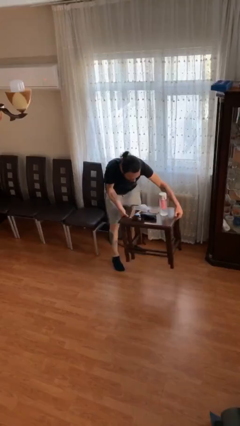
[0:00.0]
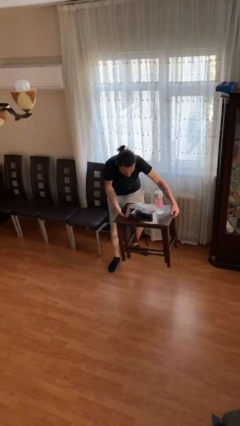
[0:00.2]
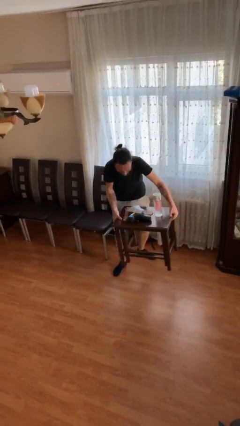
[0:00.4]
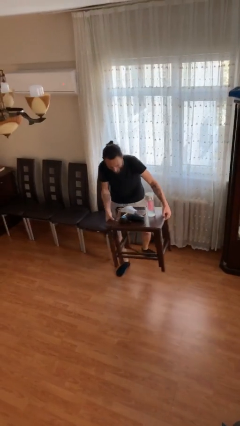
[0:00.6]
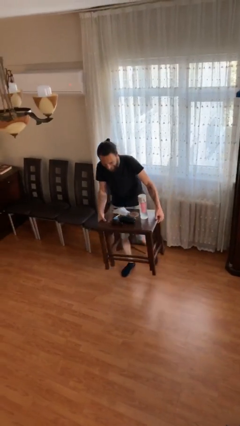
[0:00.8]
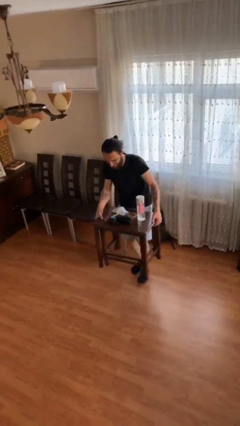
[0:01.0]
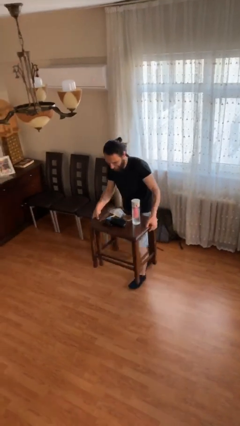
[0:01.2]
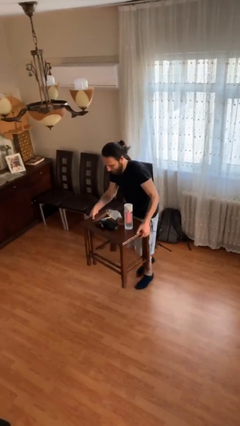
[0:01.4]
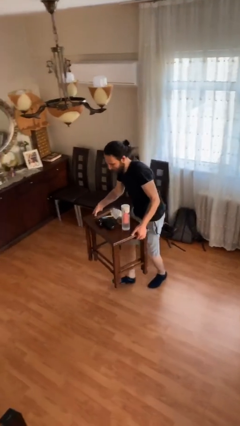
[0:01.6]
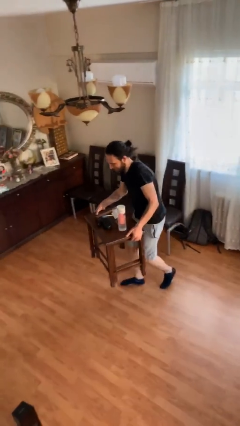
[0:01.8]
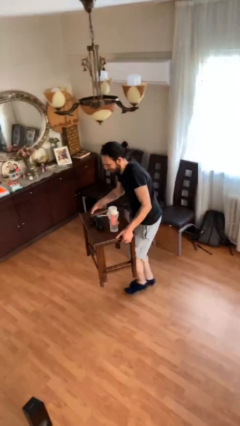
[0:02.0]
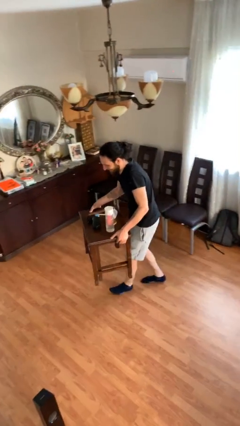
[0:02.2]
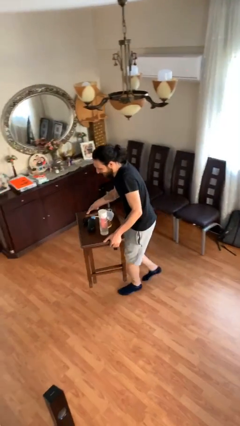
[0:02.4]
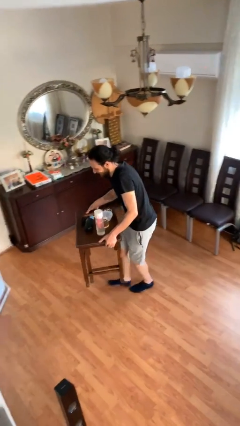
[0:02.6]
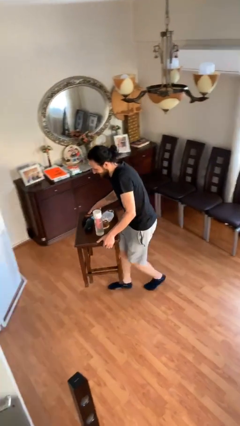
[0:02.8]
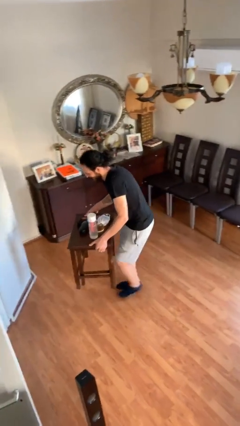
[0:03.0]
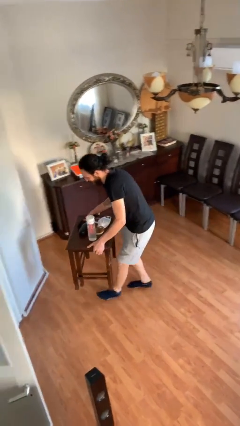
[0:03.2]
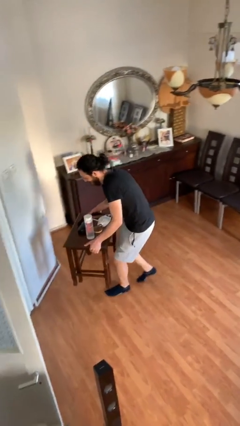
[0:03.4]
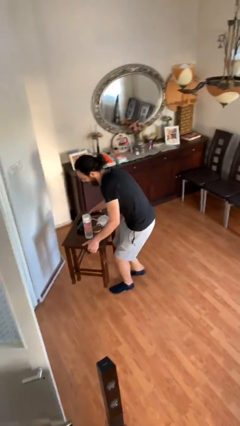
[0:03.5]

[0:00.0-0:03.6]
person carries heavy object

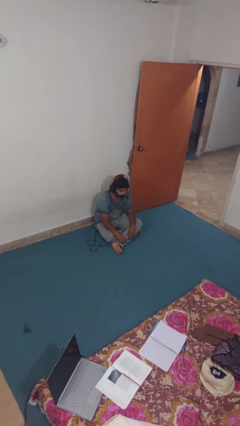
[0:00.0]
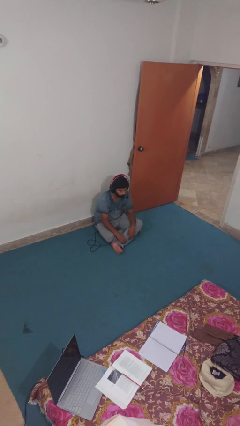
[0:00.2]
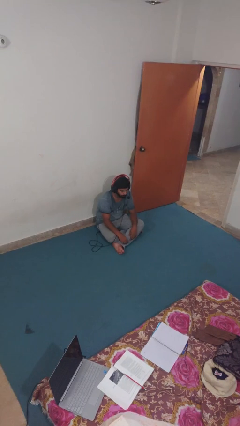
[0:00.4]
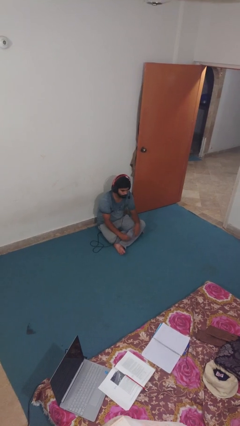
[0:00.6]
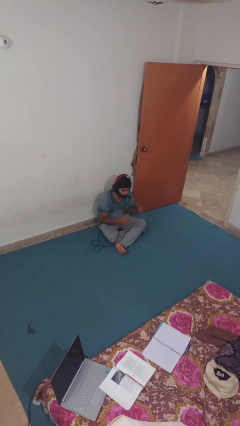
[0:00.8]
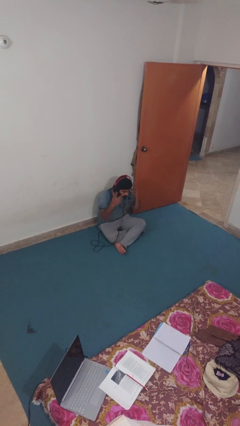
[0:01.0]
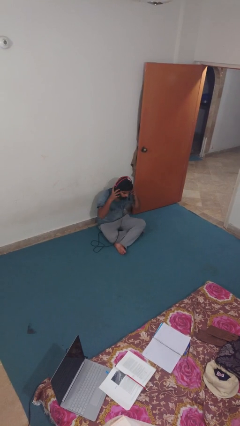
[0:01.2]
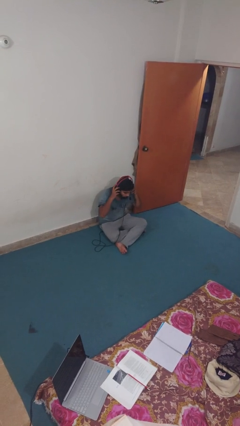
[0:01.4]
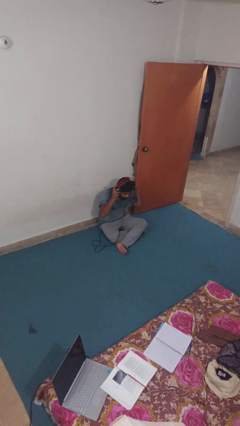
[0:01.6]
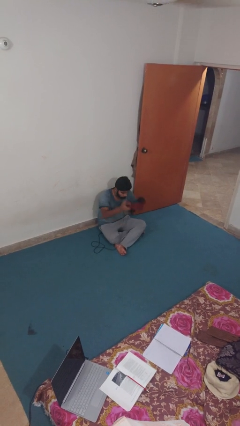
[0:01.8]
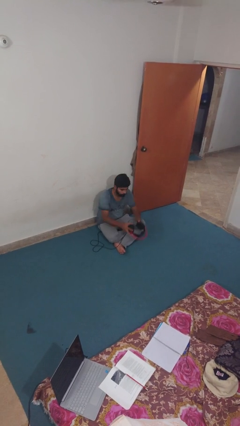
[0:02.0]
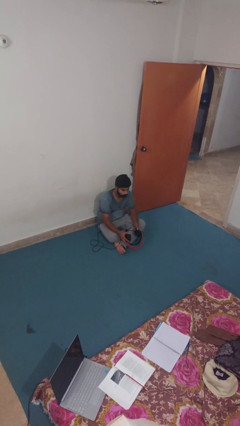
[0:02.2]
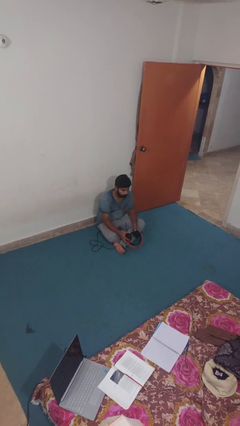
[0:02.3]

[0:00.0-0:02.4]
person takes off headphones

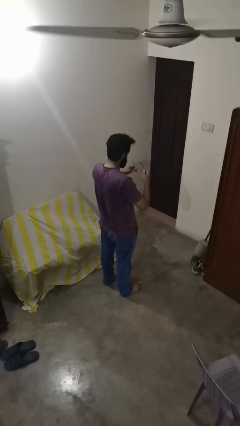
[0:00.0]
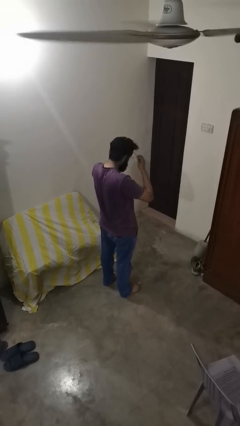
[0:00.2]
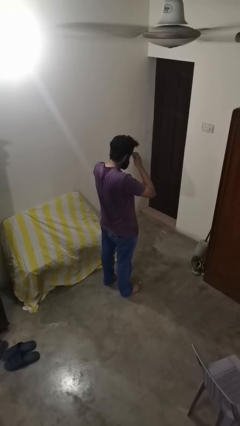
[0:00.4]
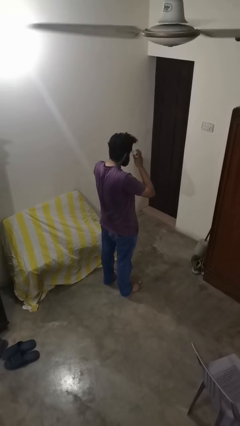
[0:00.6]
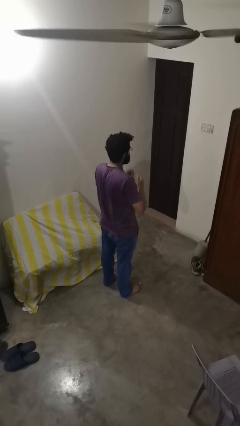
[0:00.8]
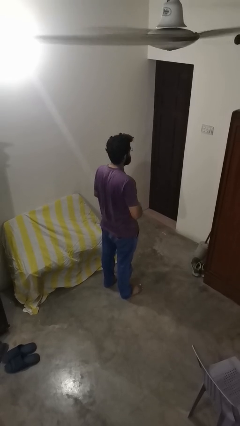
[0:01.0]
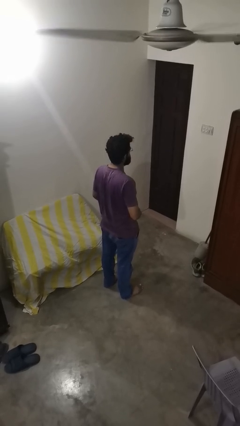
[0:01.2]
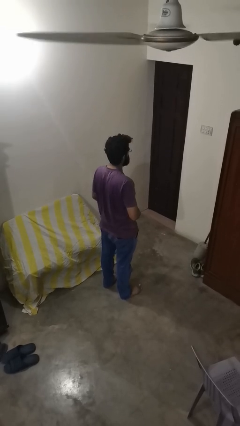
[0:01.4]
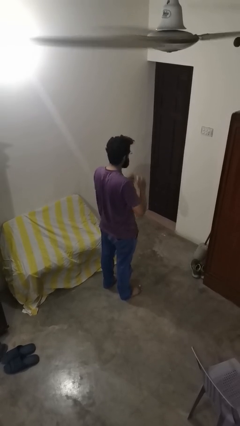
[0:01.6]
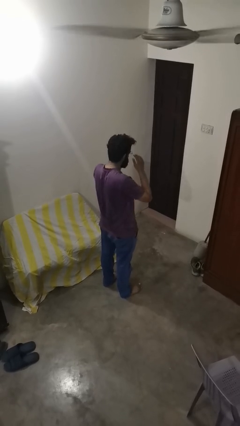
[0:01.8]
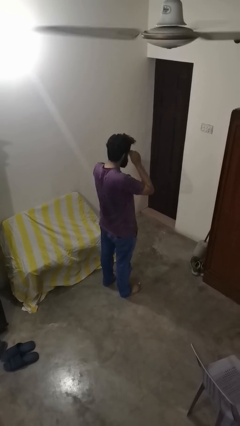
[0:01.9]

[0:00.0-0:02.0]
person puts on glasses

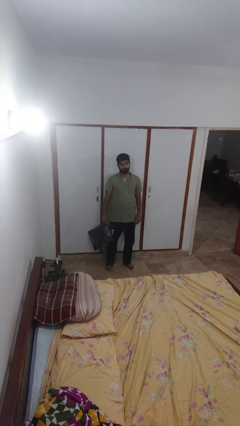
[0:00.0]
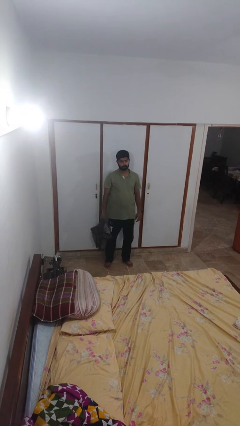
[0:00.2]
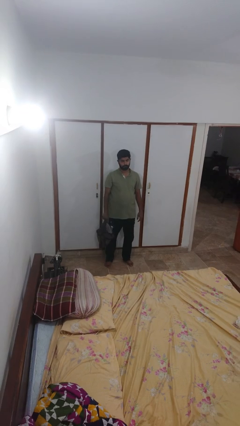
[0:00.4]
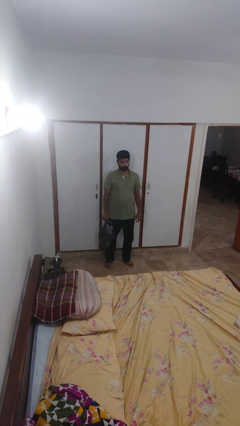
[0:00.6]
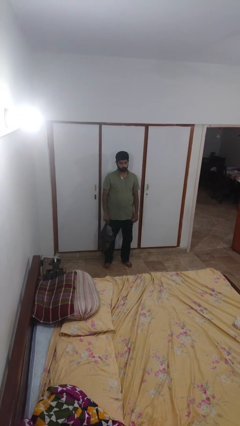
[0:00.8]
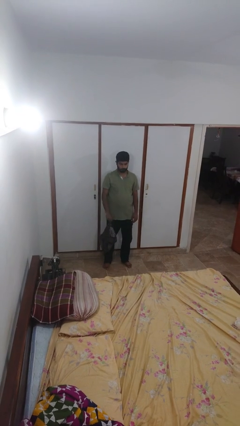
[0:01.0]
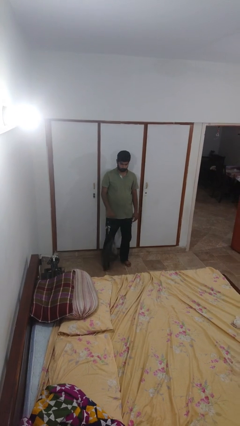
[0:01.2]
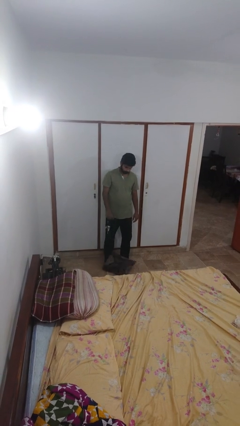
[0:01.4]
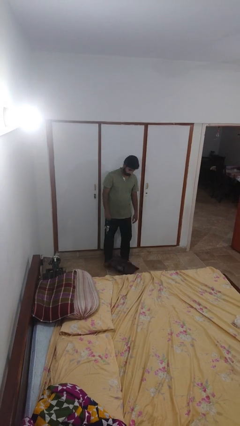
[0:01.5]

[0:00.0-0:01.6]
person drops object

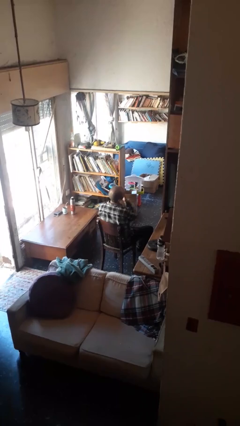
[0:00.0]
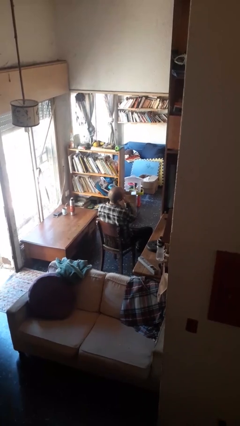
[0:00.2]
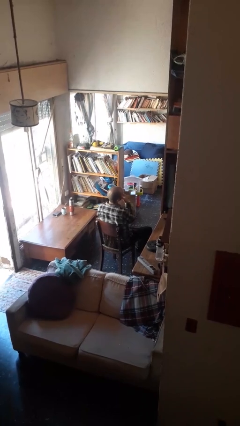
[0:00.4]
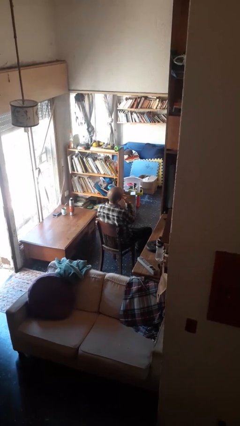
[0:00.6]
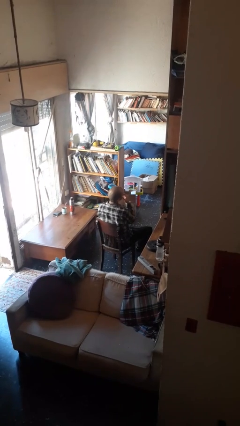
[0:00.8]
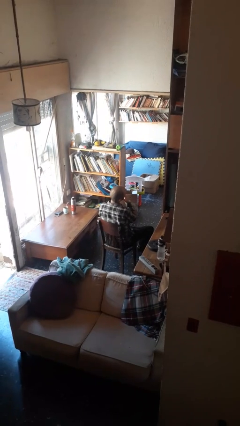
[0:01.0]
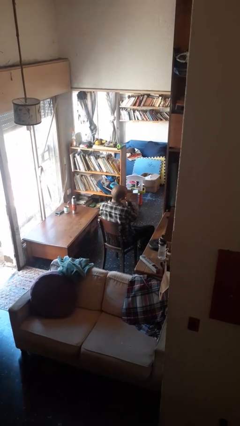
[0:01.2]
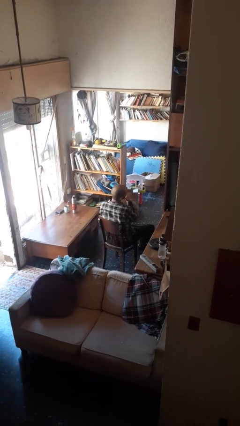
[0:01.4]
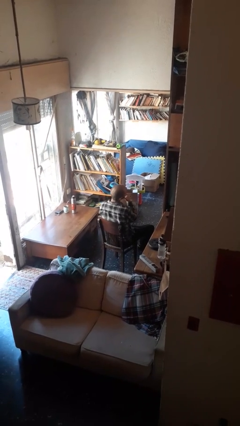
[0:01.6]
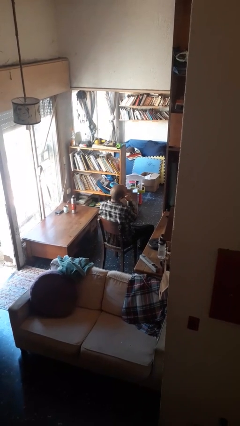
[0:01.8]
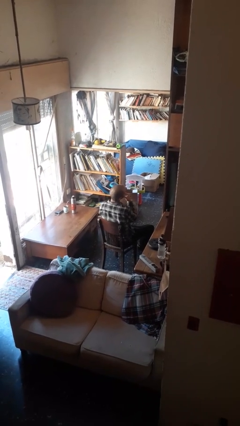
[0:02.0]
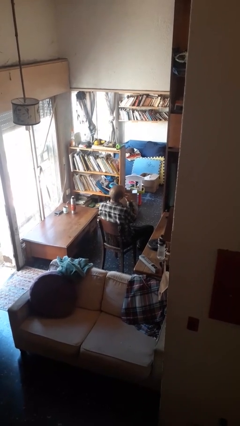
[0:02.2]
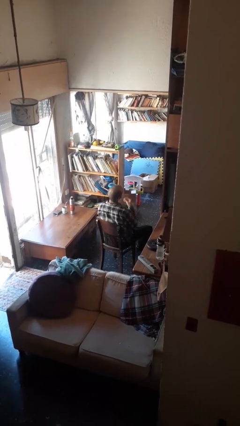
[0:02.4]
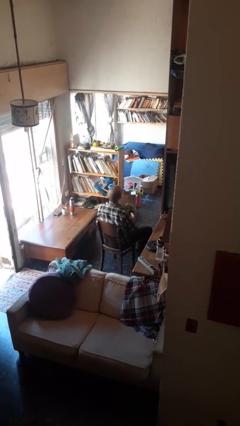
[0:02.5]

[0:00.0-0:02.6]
person strokes chin

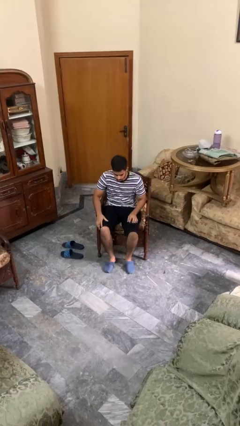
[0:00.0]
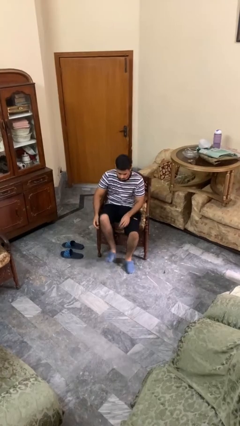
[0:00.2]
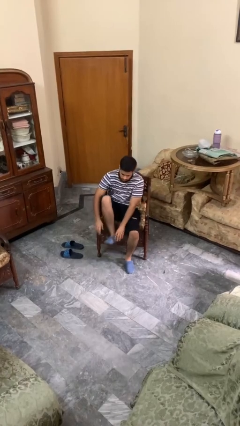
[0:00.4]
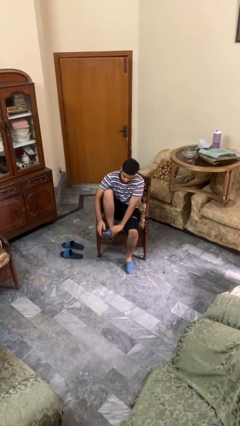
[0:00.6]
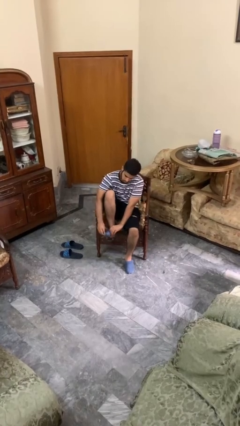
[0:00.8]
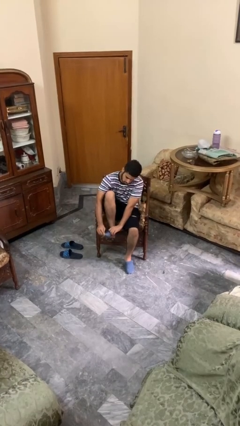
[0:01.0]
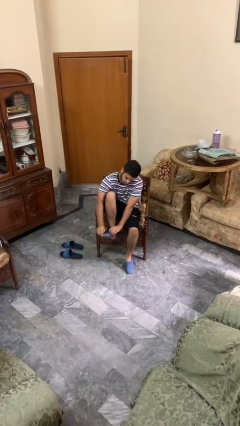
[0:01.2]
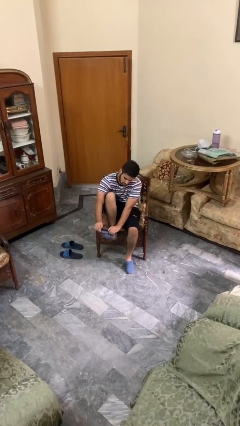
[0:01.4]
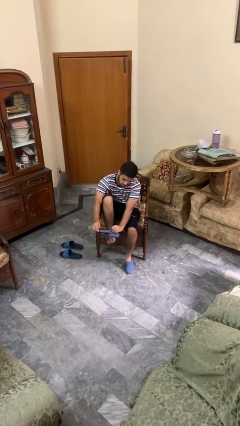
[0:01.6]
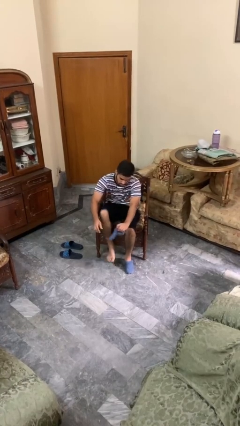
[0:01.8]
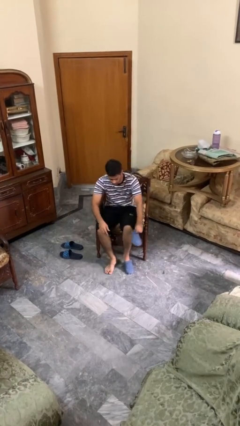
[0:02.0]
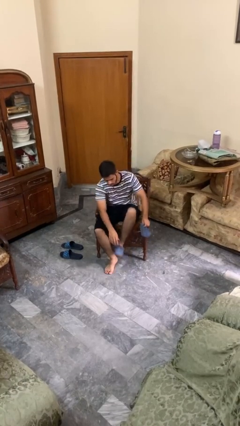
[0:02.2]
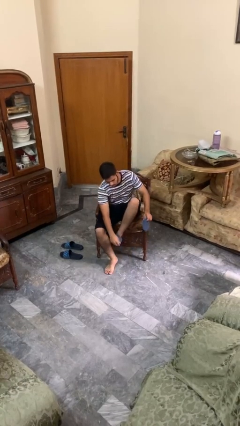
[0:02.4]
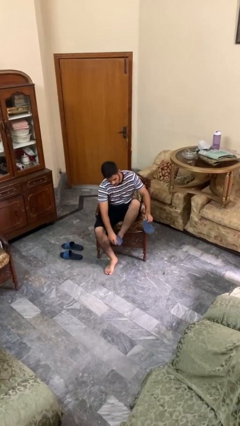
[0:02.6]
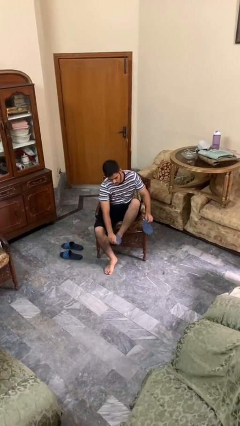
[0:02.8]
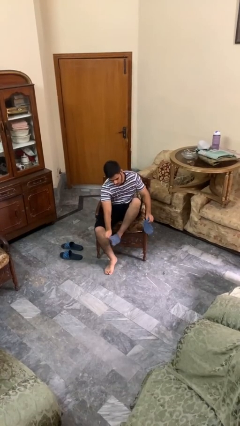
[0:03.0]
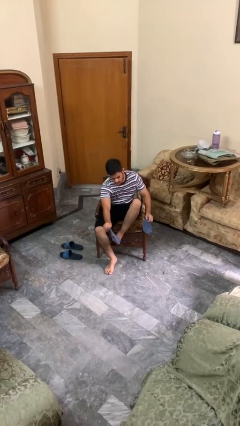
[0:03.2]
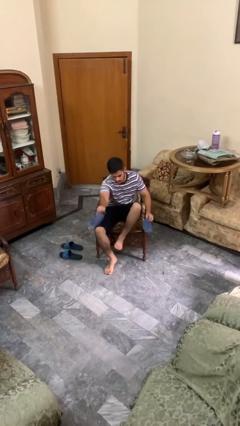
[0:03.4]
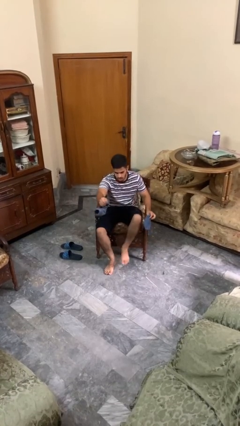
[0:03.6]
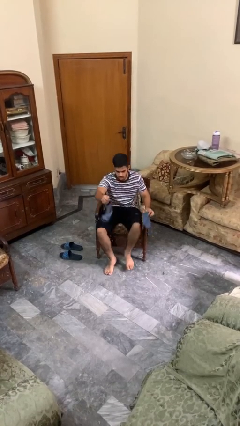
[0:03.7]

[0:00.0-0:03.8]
person takes off socks

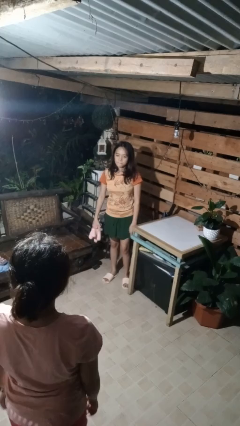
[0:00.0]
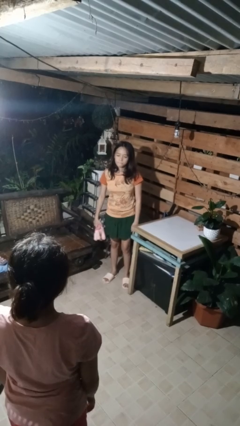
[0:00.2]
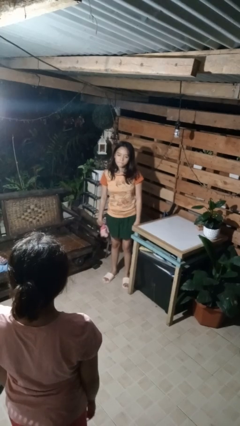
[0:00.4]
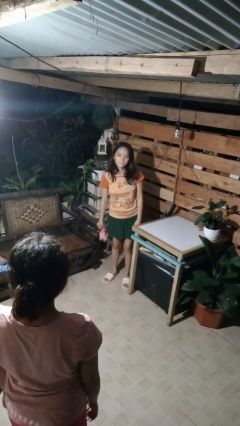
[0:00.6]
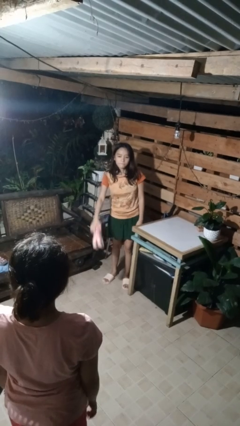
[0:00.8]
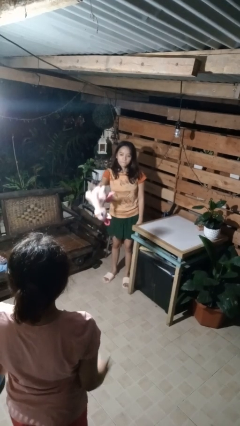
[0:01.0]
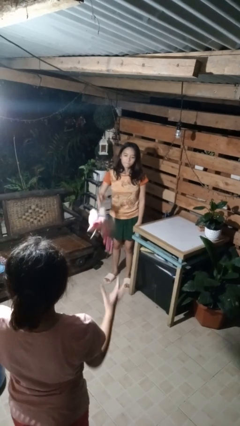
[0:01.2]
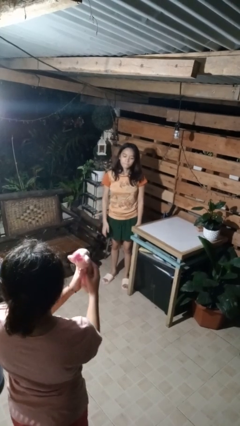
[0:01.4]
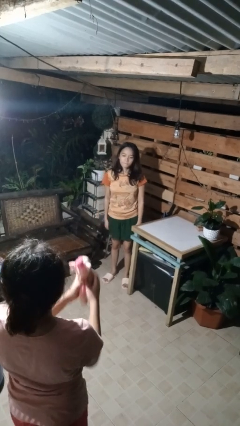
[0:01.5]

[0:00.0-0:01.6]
person throws object to person
